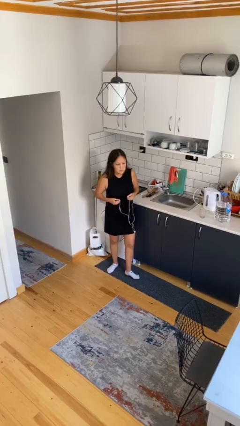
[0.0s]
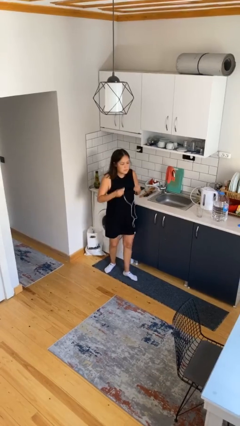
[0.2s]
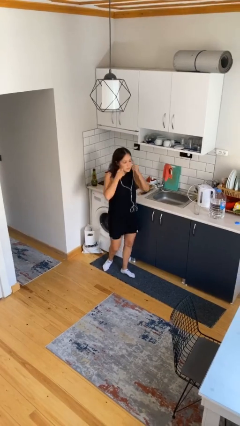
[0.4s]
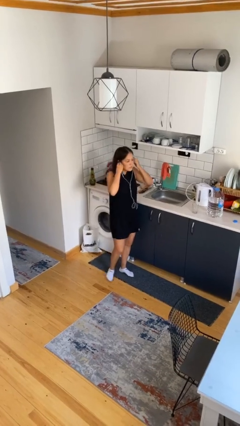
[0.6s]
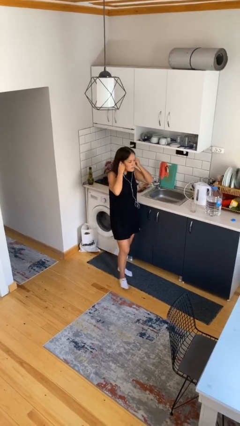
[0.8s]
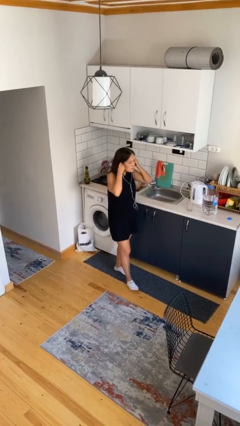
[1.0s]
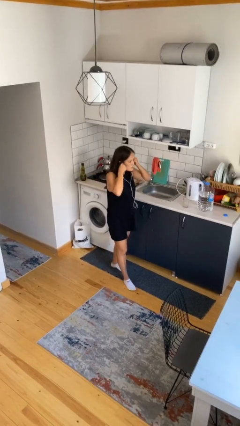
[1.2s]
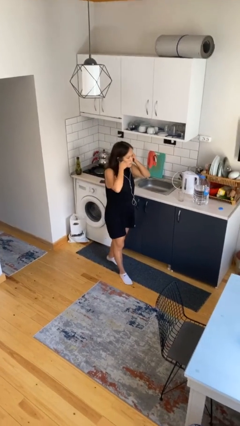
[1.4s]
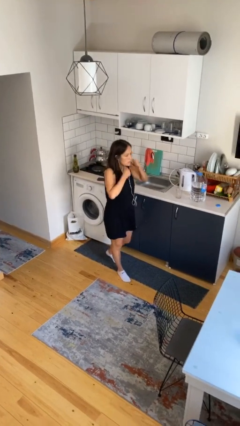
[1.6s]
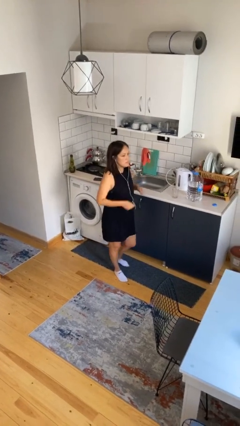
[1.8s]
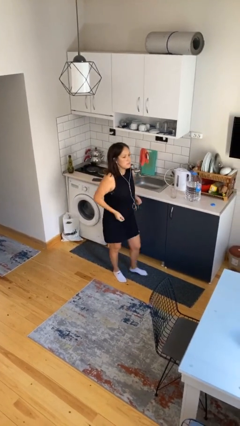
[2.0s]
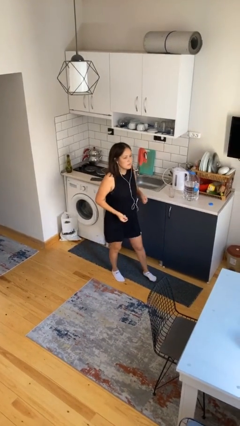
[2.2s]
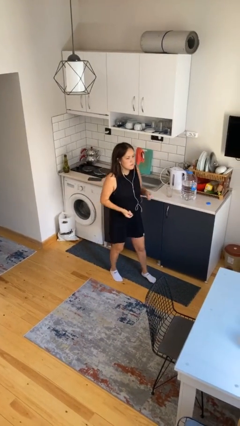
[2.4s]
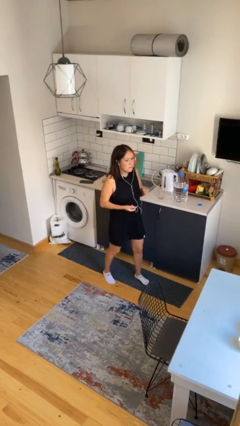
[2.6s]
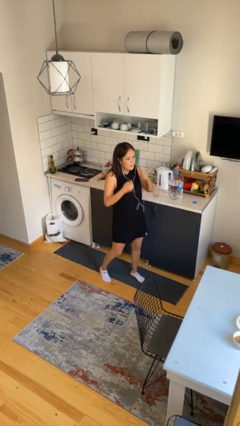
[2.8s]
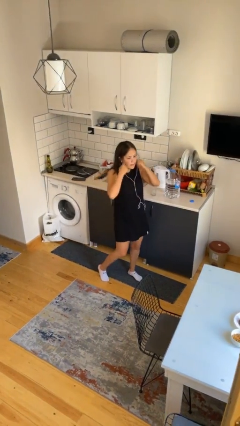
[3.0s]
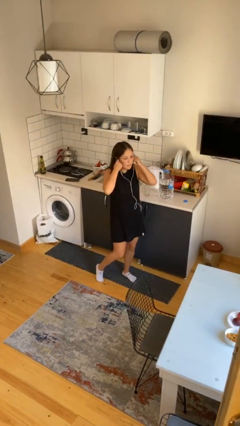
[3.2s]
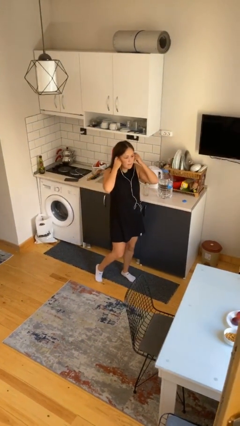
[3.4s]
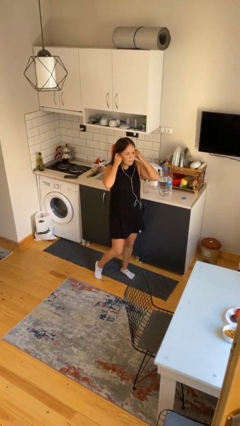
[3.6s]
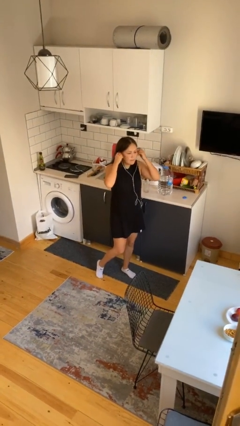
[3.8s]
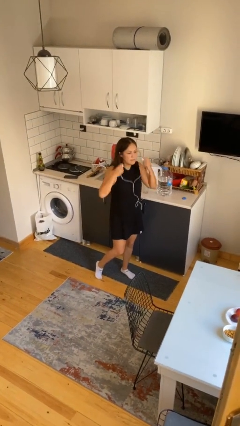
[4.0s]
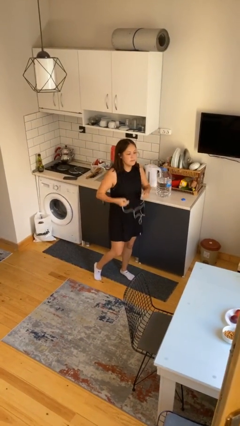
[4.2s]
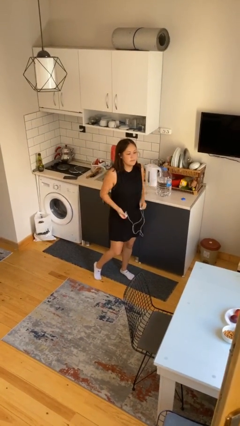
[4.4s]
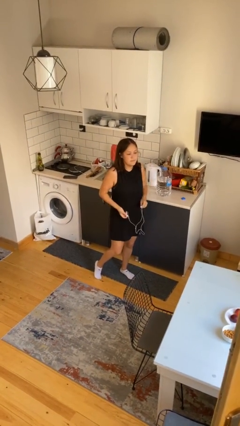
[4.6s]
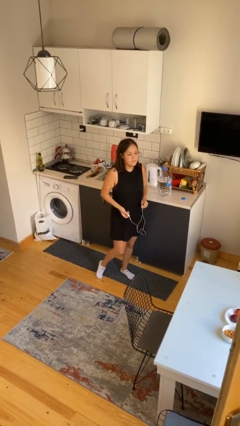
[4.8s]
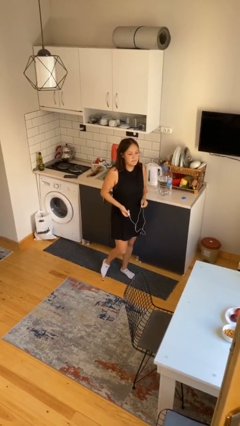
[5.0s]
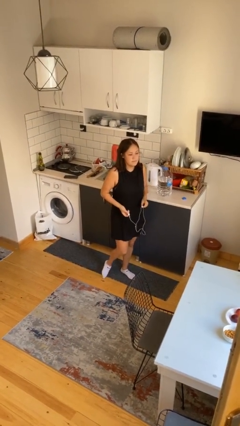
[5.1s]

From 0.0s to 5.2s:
person puts on headphones

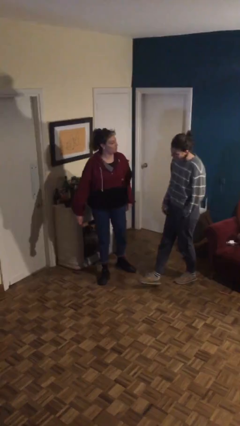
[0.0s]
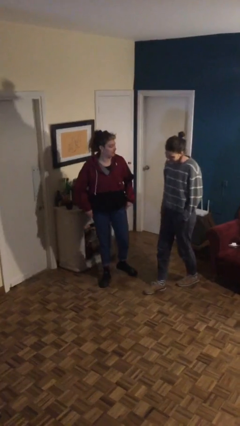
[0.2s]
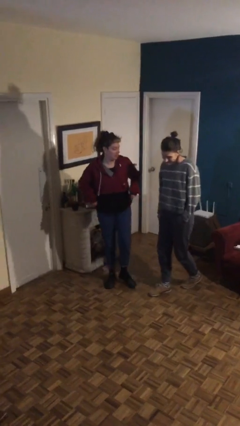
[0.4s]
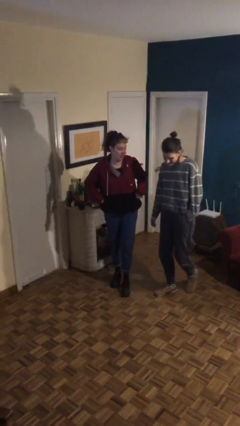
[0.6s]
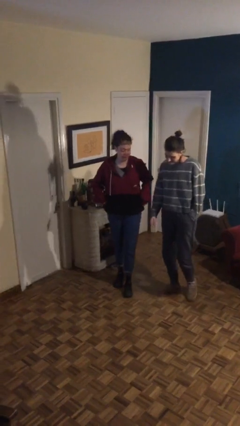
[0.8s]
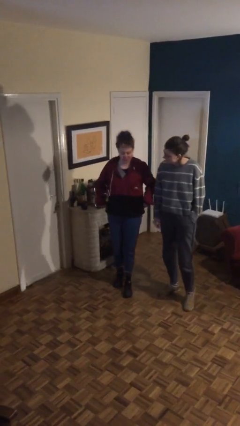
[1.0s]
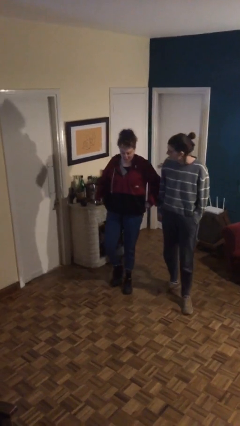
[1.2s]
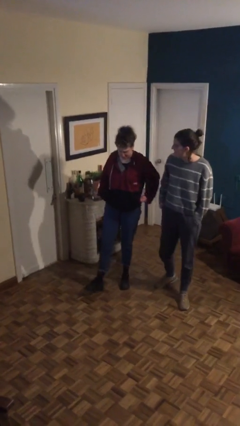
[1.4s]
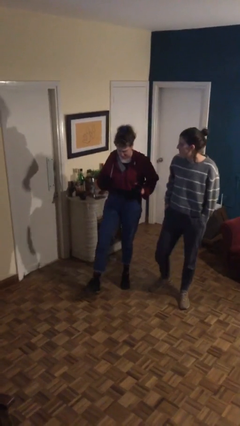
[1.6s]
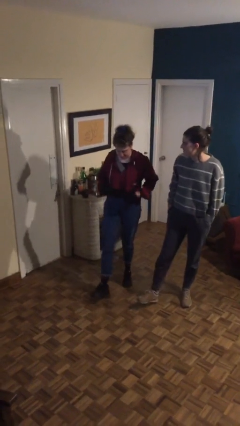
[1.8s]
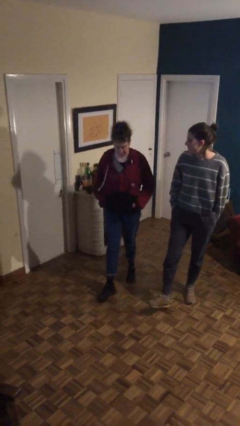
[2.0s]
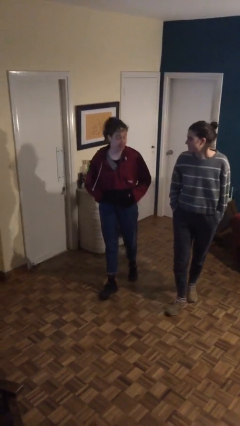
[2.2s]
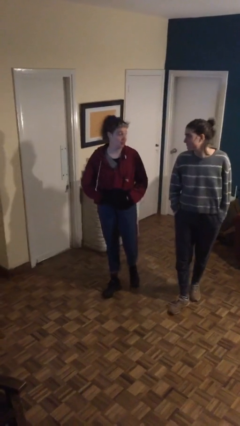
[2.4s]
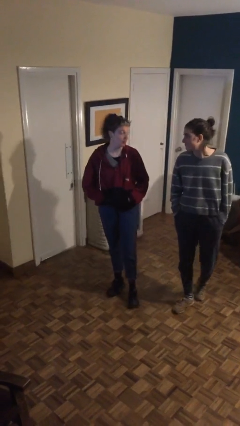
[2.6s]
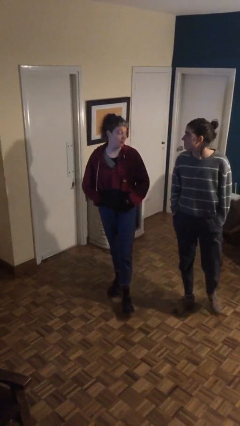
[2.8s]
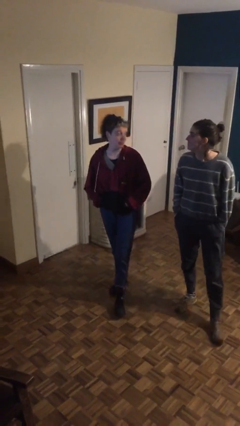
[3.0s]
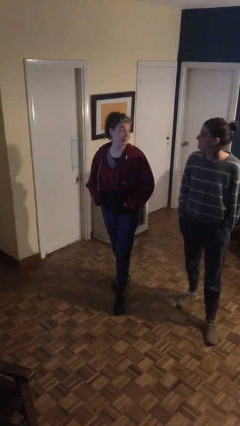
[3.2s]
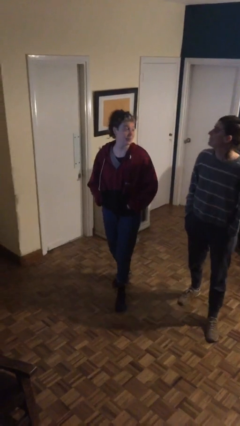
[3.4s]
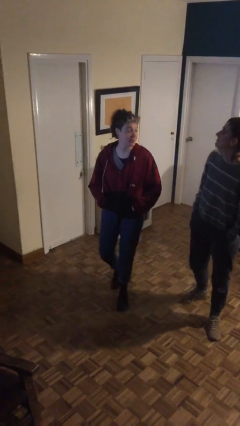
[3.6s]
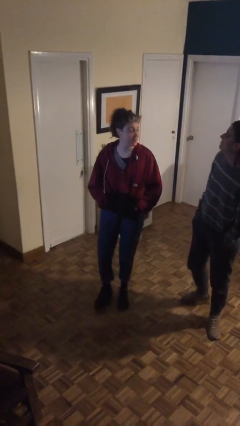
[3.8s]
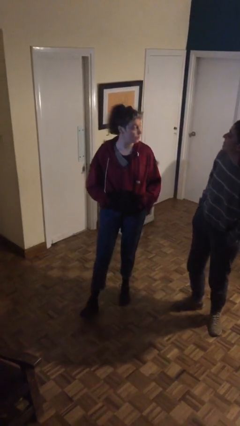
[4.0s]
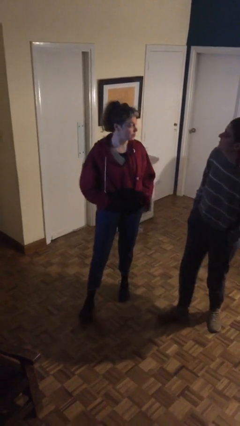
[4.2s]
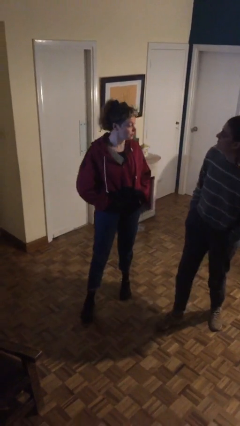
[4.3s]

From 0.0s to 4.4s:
person talks to person

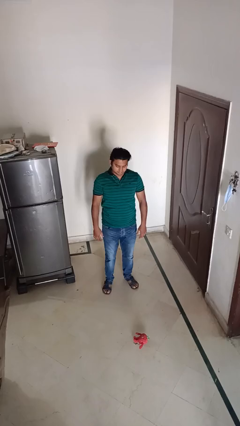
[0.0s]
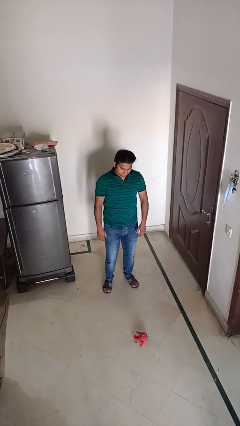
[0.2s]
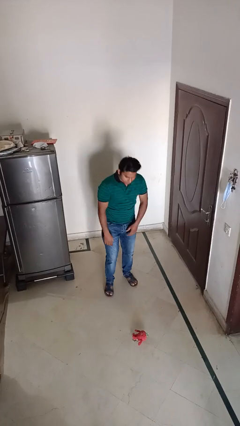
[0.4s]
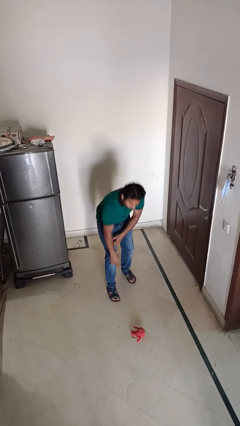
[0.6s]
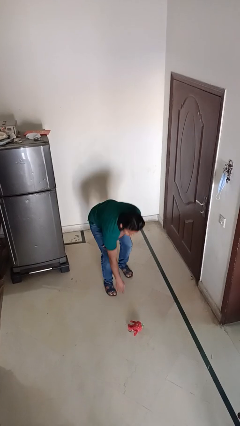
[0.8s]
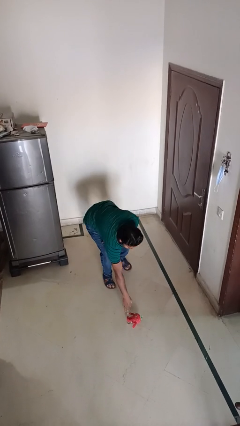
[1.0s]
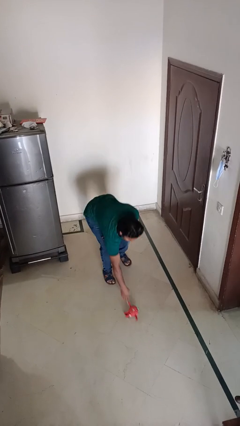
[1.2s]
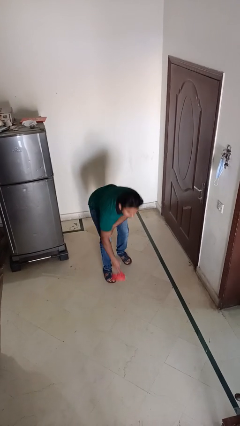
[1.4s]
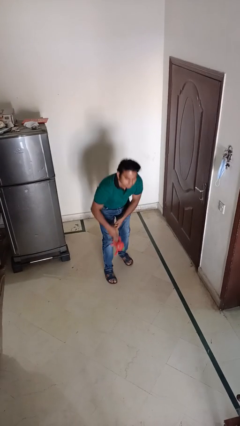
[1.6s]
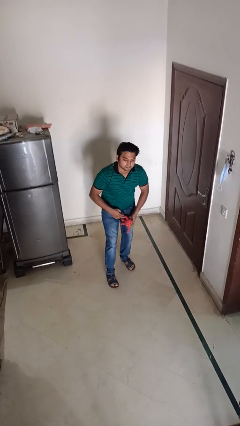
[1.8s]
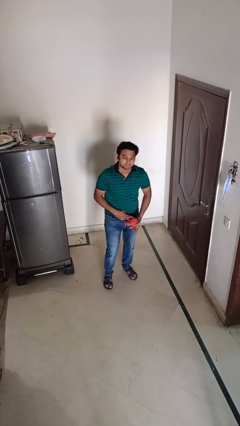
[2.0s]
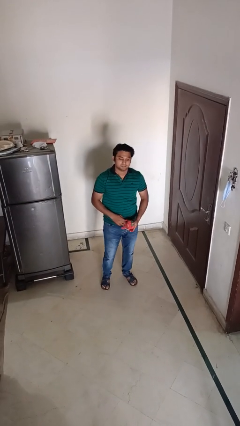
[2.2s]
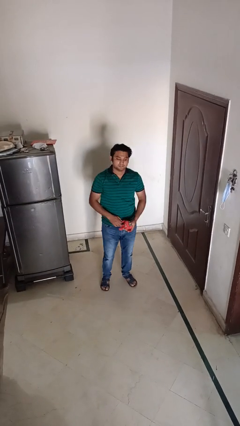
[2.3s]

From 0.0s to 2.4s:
person picks up object from floor

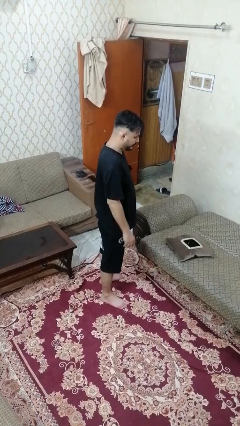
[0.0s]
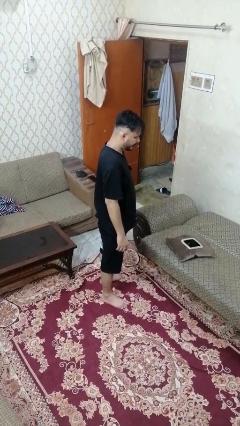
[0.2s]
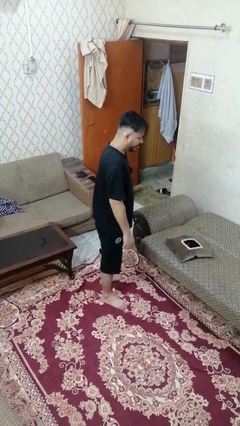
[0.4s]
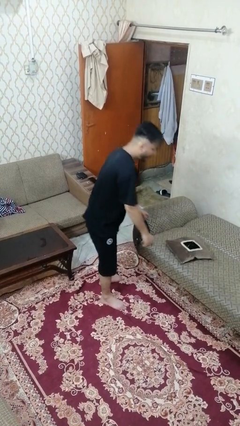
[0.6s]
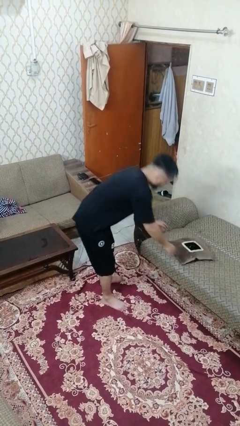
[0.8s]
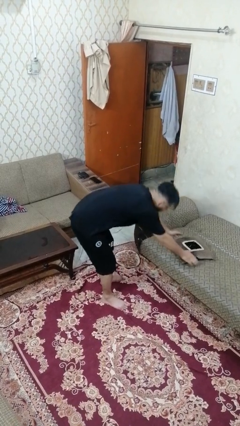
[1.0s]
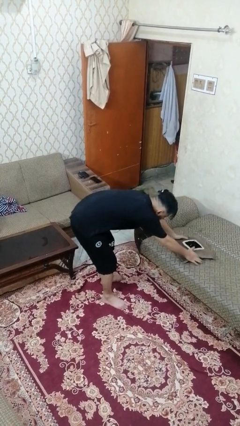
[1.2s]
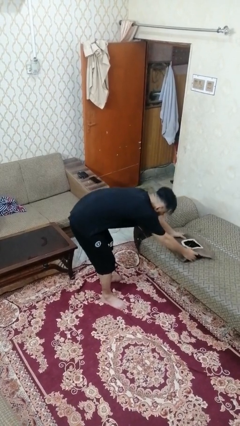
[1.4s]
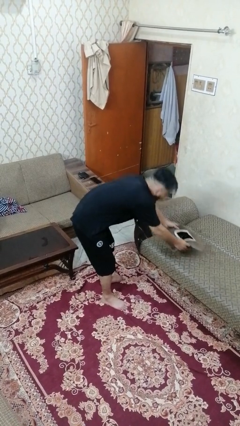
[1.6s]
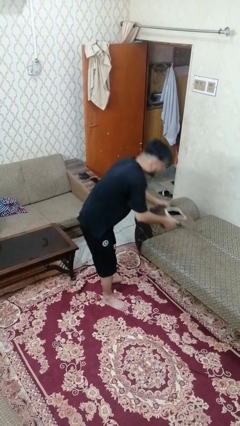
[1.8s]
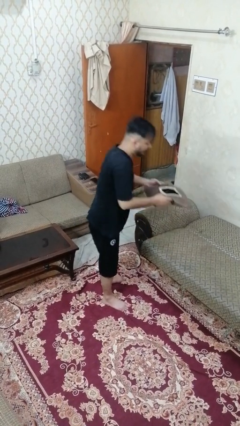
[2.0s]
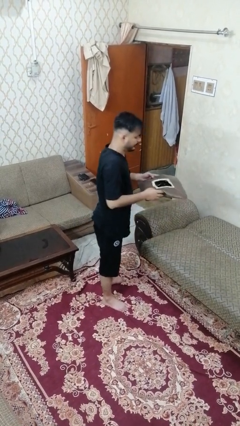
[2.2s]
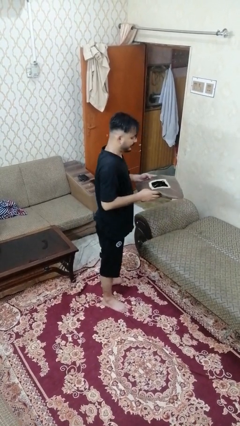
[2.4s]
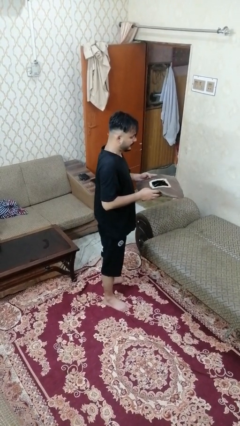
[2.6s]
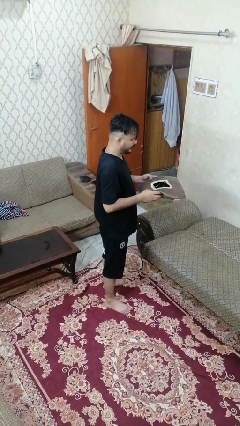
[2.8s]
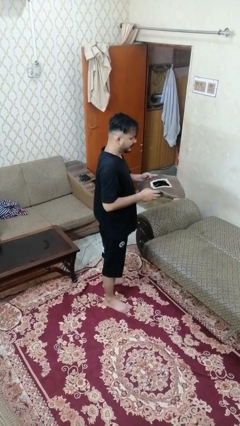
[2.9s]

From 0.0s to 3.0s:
person picks up object from couch

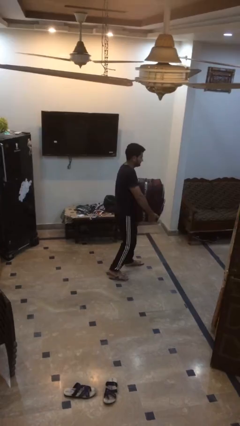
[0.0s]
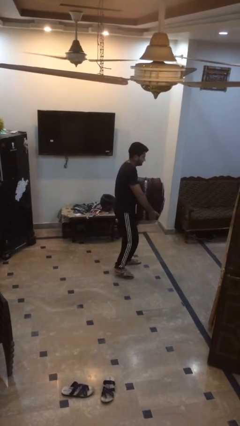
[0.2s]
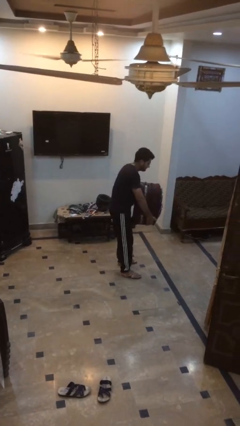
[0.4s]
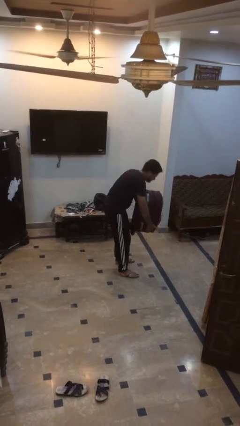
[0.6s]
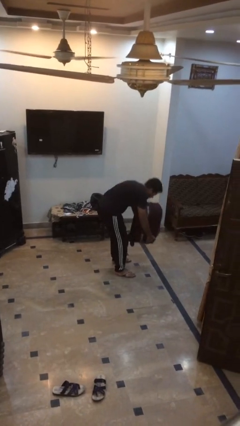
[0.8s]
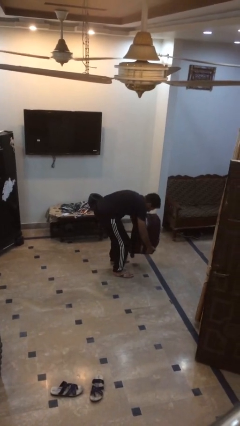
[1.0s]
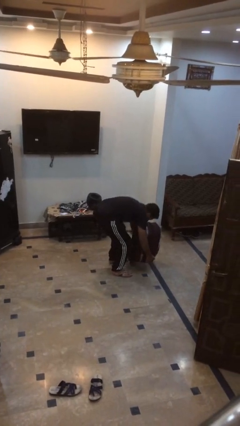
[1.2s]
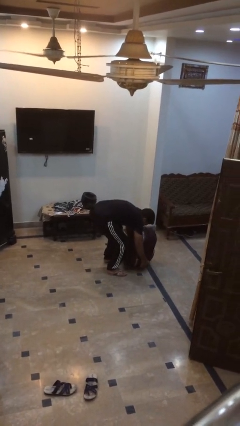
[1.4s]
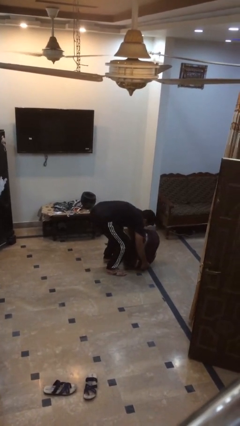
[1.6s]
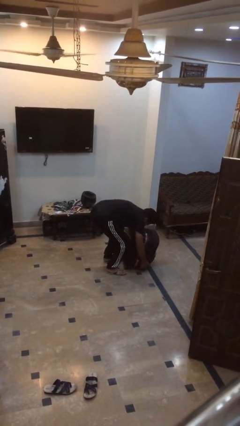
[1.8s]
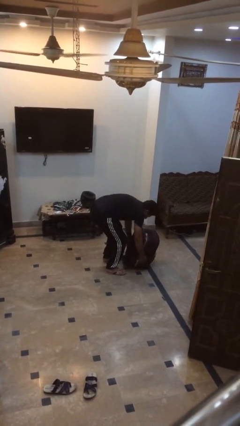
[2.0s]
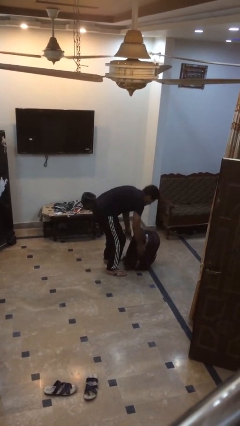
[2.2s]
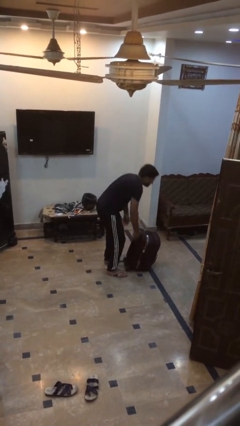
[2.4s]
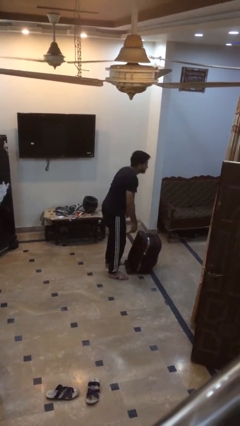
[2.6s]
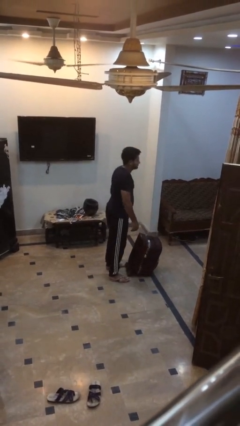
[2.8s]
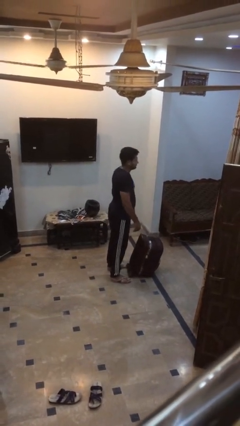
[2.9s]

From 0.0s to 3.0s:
person puts down object on floor
